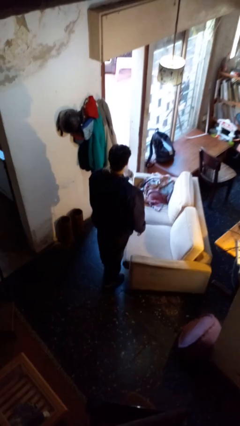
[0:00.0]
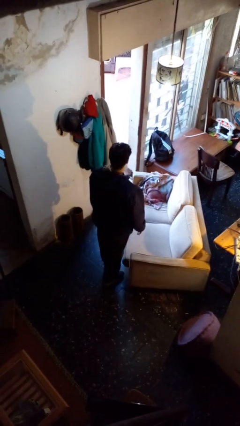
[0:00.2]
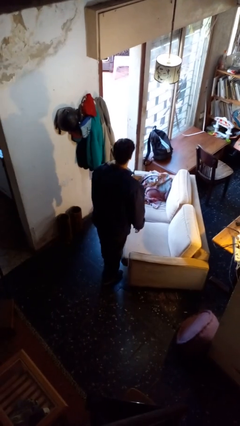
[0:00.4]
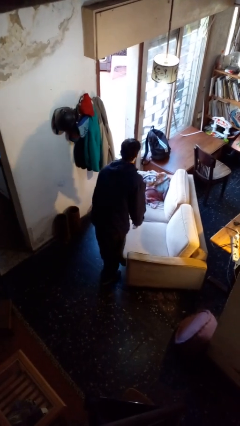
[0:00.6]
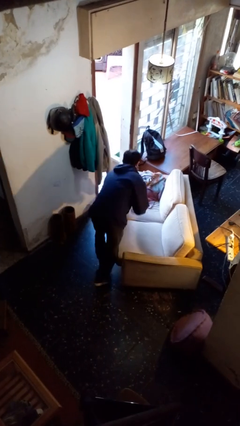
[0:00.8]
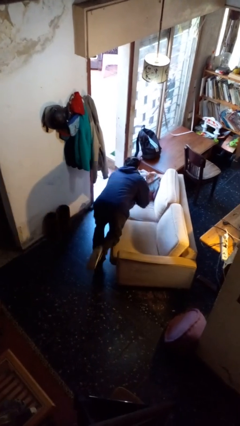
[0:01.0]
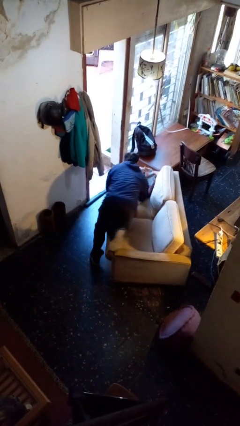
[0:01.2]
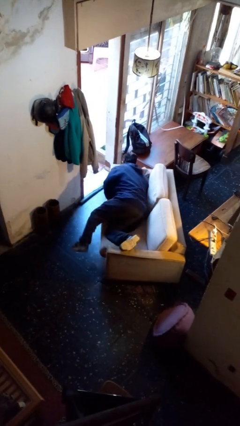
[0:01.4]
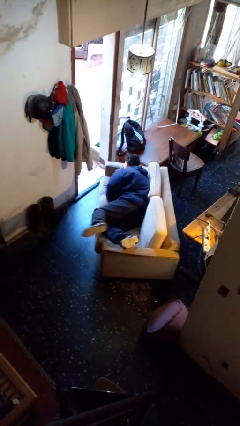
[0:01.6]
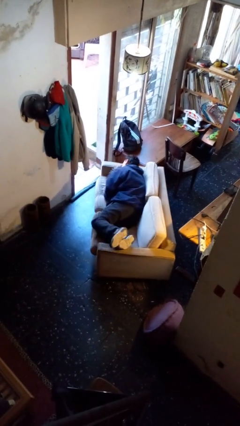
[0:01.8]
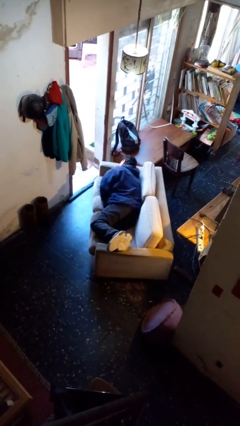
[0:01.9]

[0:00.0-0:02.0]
person lies down on couch

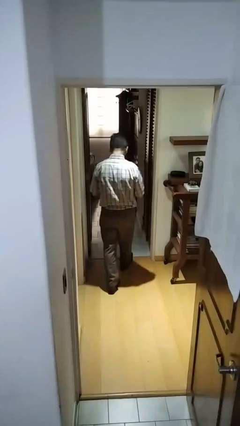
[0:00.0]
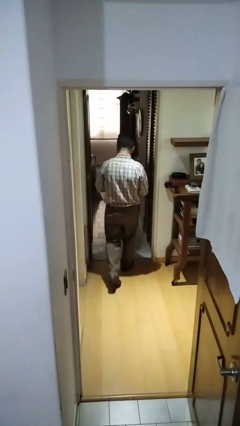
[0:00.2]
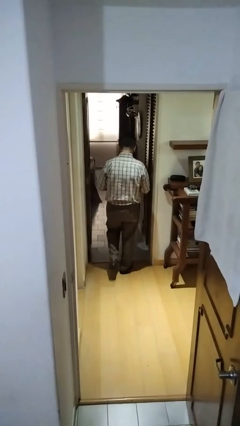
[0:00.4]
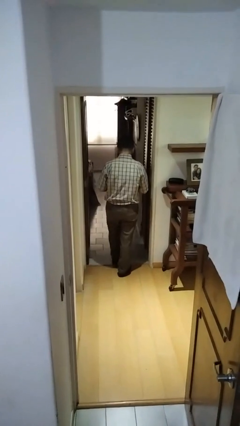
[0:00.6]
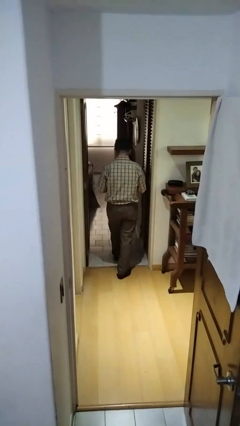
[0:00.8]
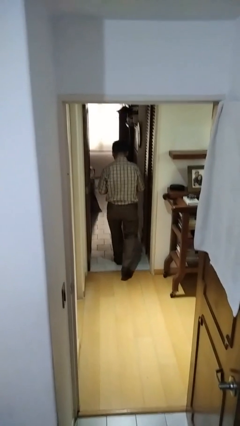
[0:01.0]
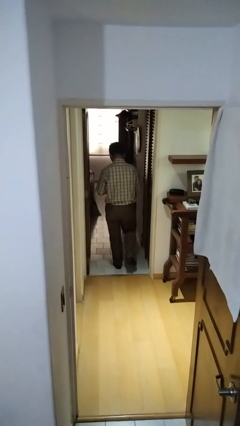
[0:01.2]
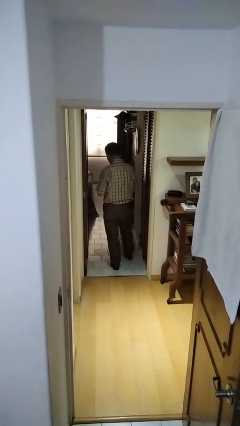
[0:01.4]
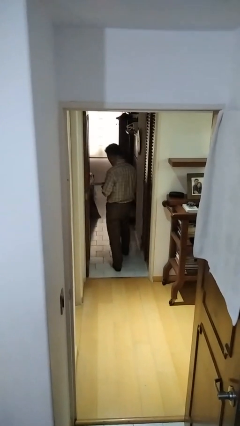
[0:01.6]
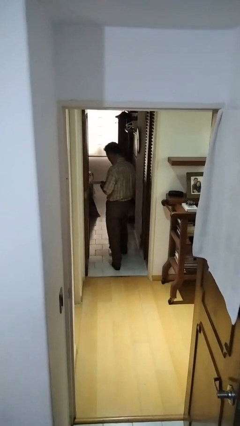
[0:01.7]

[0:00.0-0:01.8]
person exits scene through structure

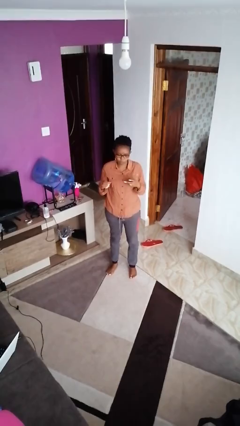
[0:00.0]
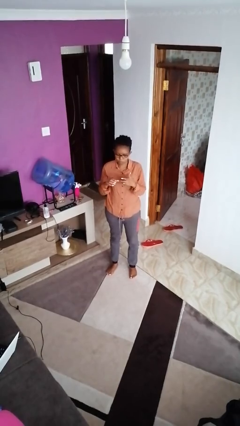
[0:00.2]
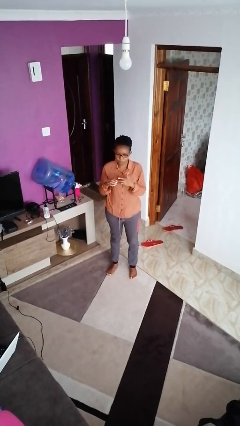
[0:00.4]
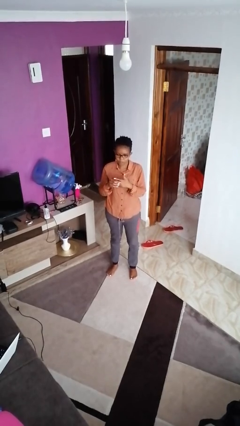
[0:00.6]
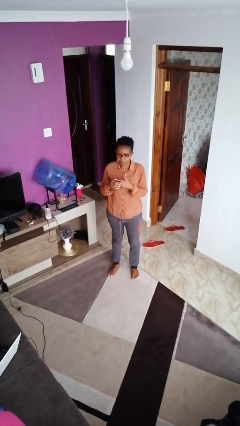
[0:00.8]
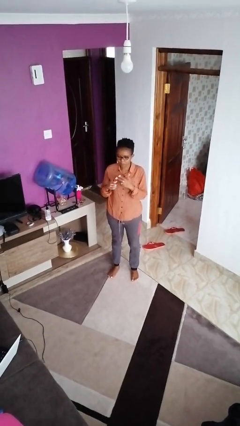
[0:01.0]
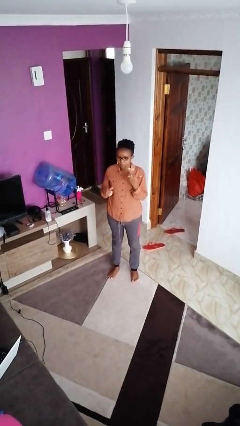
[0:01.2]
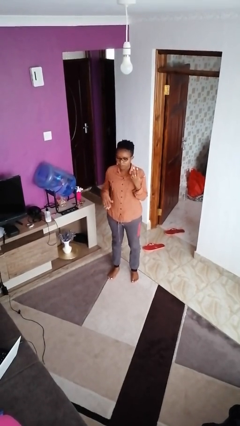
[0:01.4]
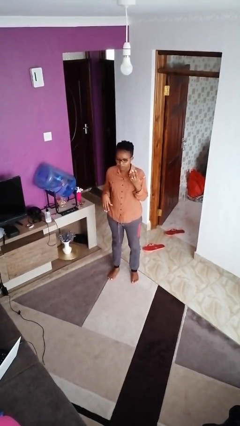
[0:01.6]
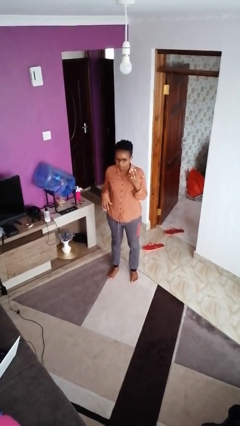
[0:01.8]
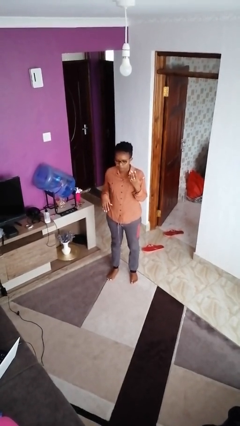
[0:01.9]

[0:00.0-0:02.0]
person puts on ring

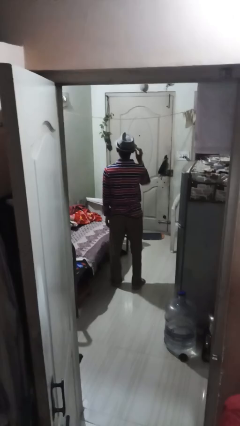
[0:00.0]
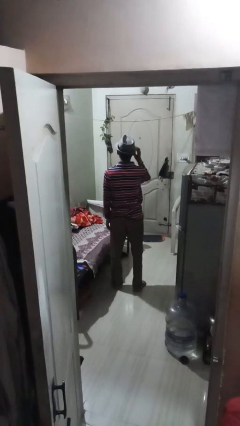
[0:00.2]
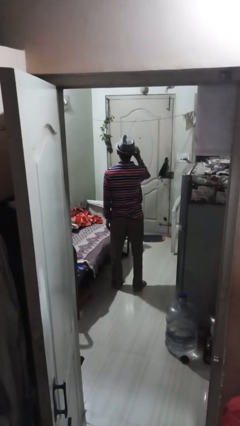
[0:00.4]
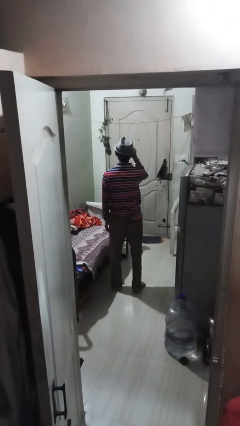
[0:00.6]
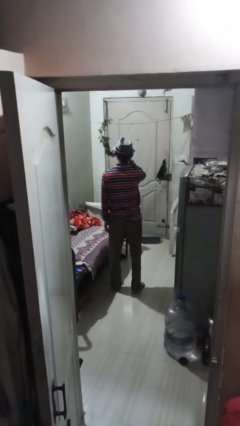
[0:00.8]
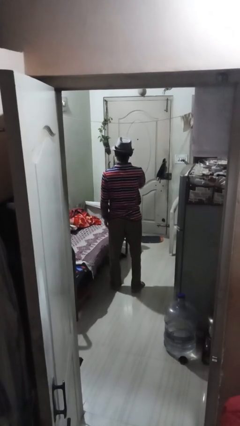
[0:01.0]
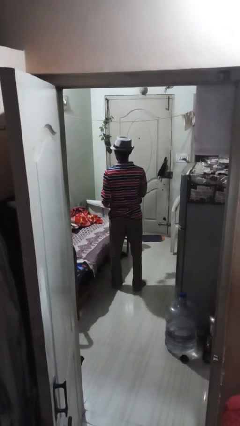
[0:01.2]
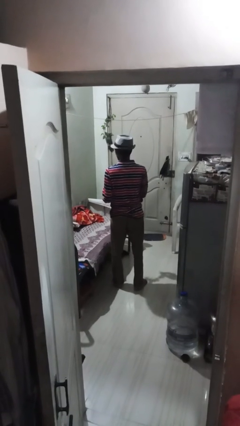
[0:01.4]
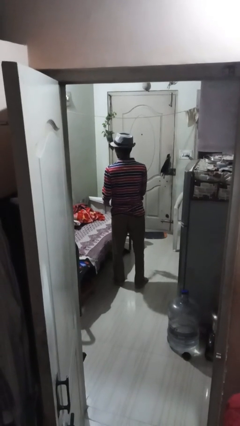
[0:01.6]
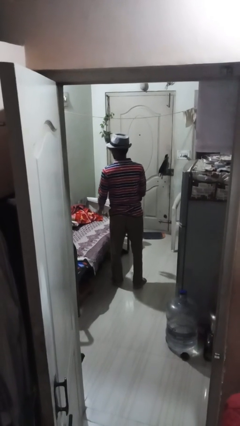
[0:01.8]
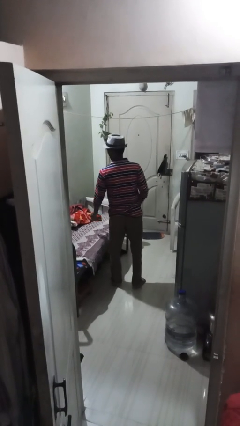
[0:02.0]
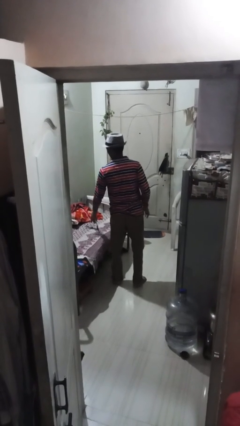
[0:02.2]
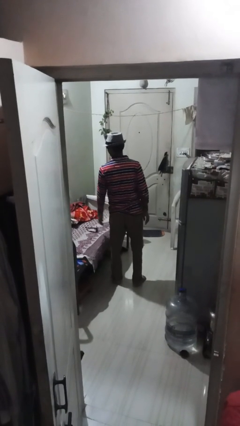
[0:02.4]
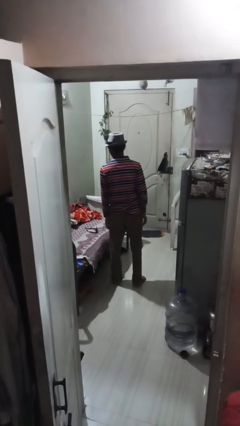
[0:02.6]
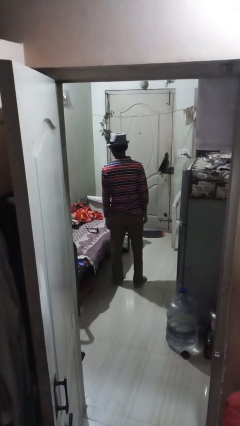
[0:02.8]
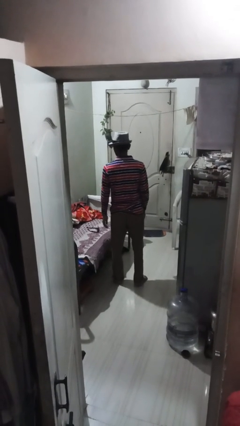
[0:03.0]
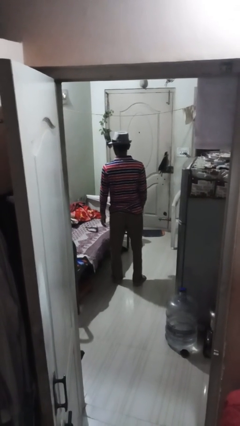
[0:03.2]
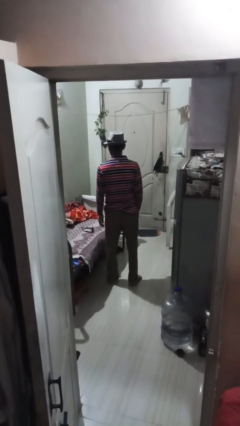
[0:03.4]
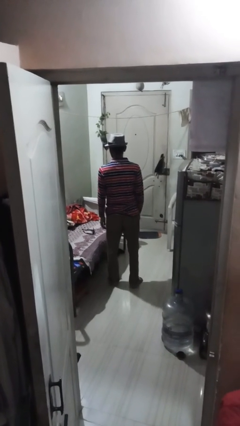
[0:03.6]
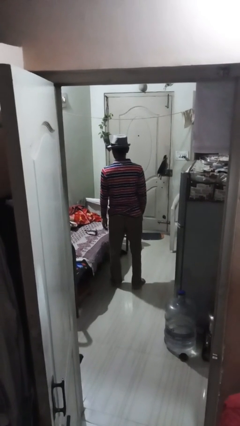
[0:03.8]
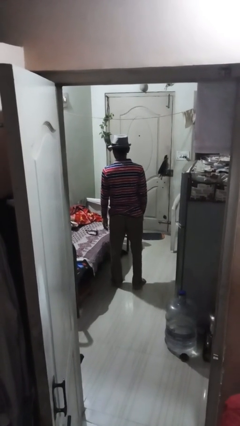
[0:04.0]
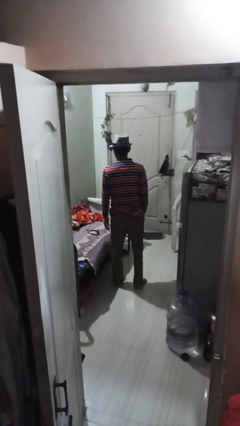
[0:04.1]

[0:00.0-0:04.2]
person takes off sunglasses

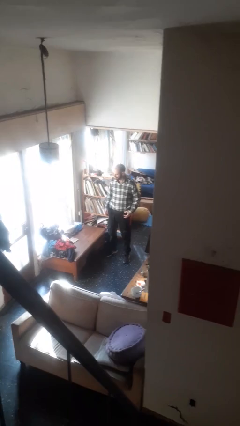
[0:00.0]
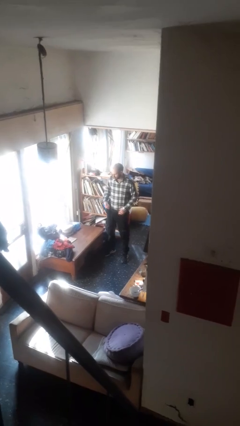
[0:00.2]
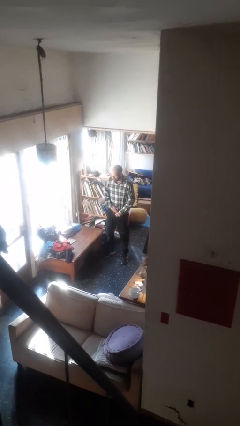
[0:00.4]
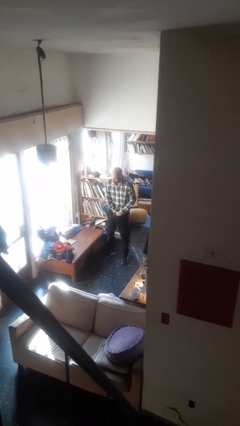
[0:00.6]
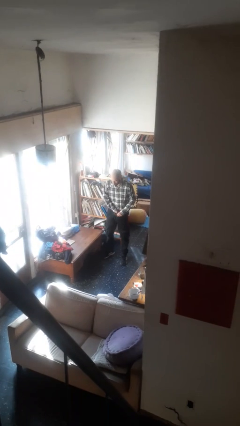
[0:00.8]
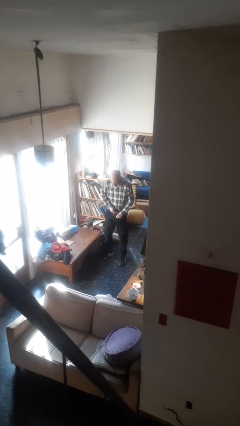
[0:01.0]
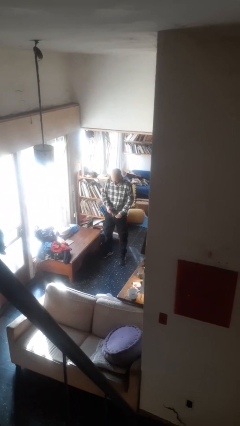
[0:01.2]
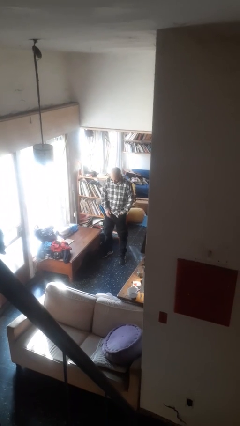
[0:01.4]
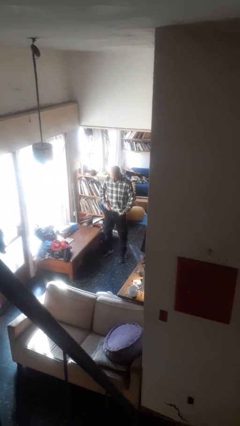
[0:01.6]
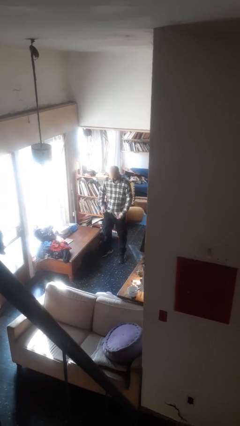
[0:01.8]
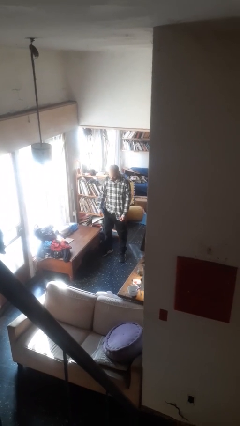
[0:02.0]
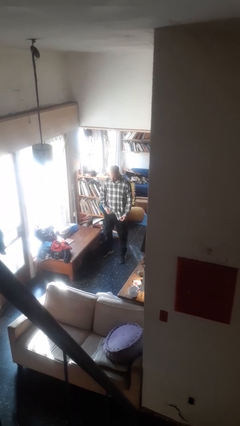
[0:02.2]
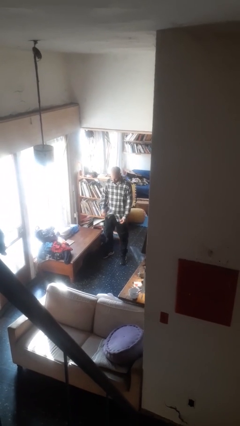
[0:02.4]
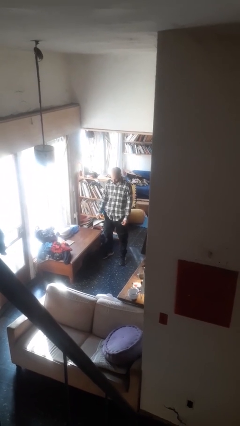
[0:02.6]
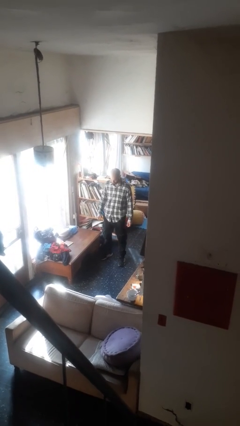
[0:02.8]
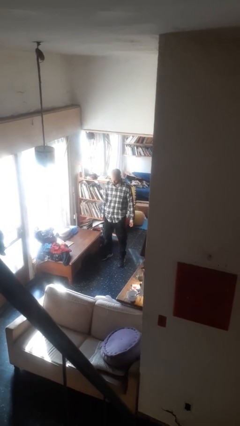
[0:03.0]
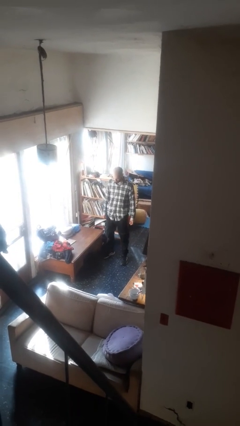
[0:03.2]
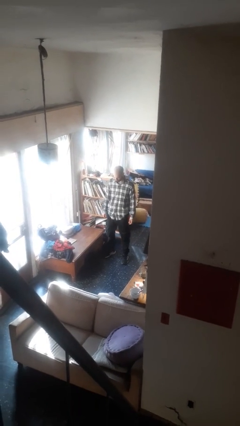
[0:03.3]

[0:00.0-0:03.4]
person untucks shirt

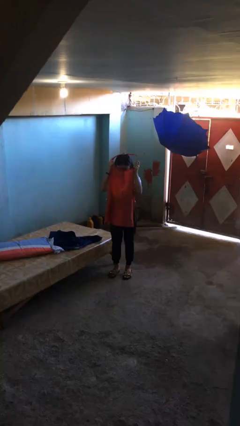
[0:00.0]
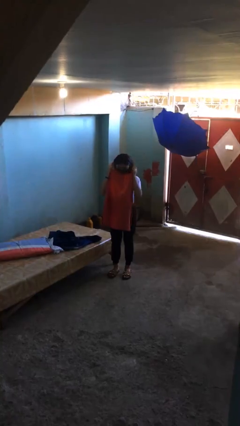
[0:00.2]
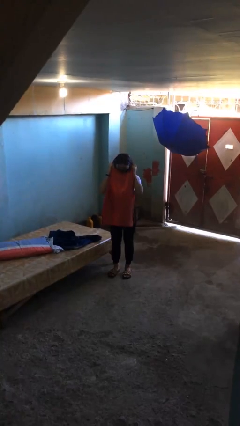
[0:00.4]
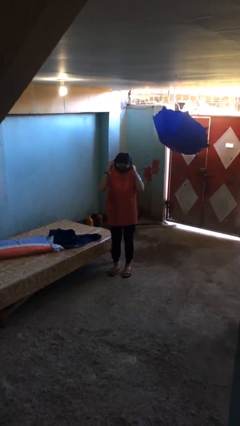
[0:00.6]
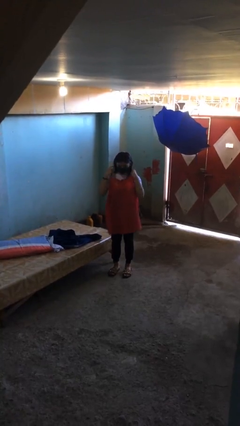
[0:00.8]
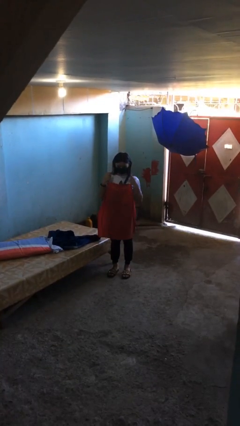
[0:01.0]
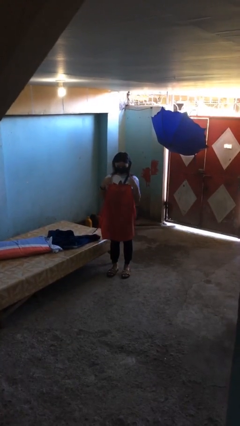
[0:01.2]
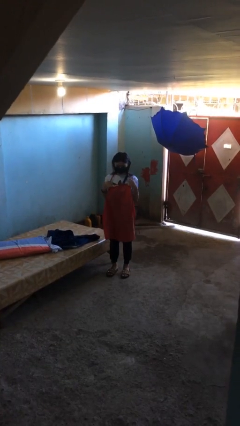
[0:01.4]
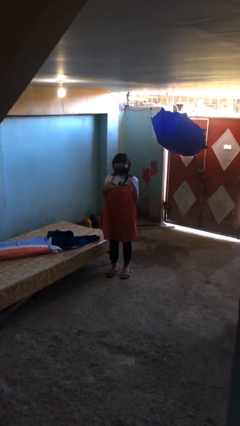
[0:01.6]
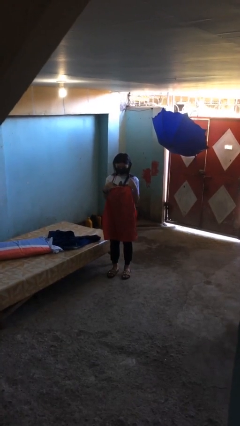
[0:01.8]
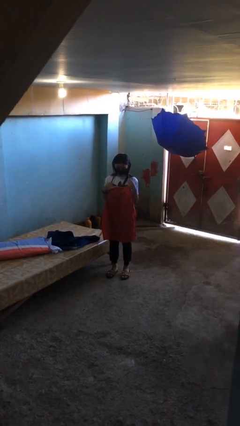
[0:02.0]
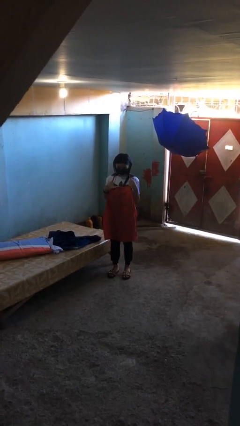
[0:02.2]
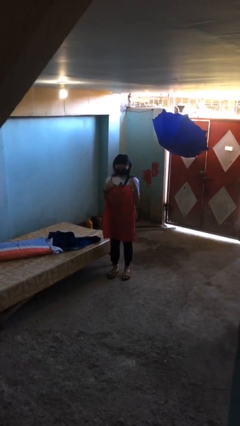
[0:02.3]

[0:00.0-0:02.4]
person puts on apron

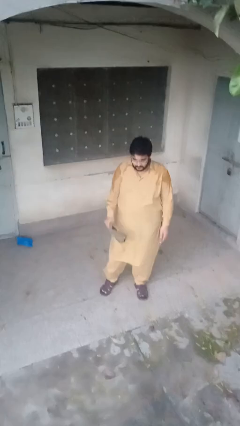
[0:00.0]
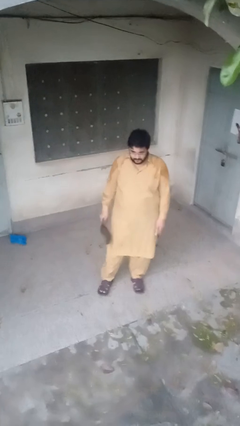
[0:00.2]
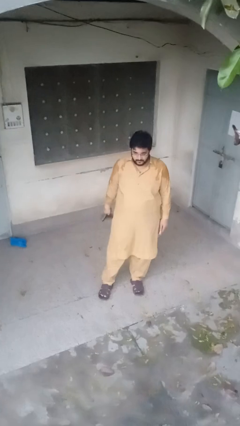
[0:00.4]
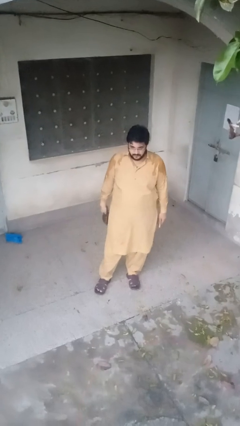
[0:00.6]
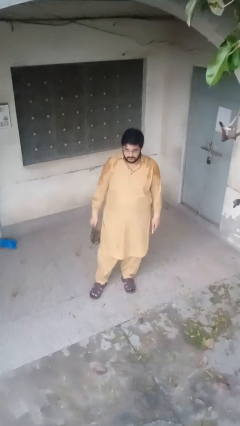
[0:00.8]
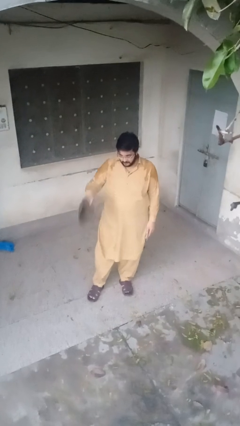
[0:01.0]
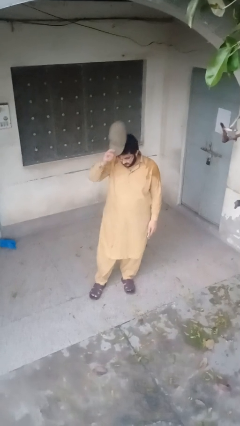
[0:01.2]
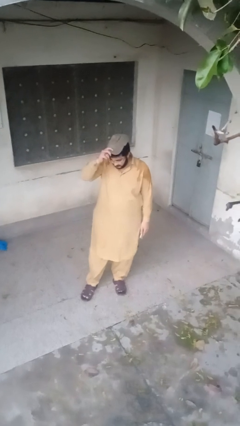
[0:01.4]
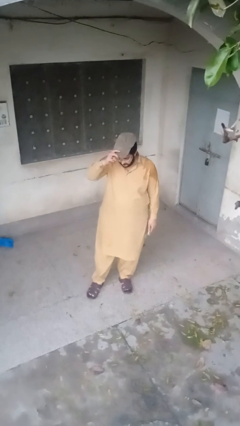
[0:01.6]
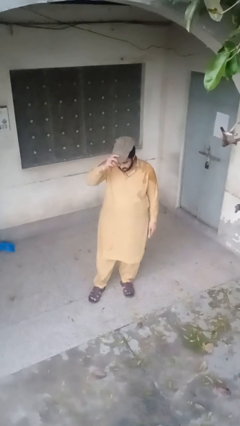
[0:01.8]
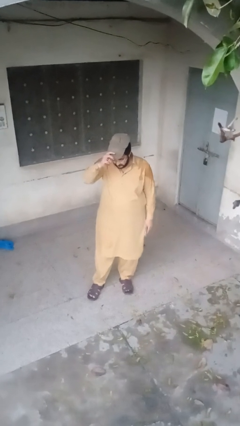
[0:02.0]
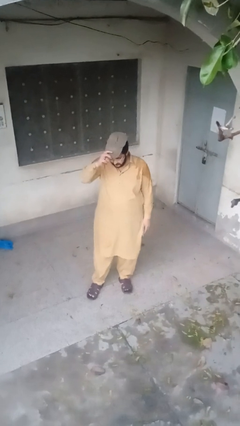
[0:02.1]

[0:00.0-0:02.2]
person puts on hat
